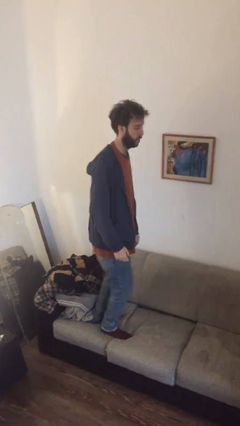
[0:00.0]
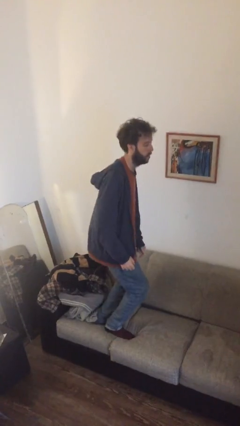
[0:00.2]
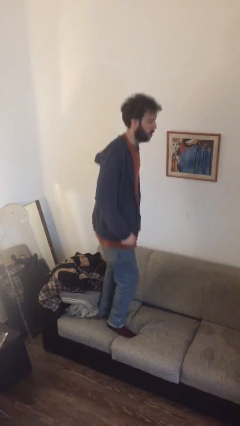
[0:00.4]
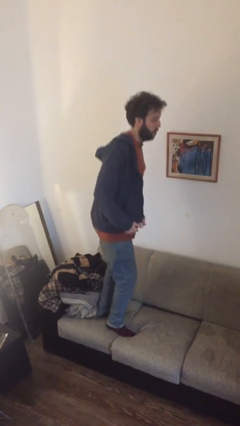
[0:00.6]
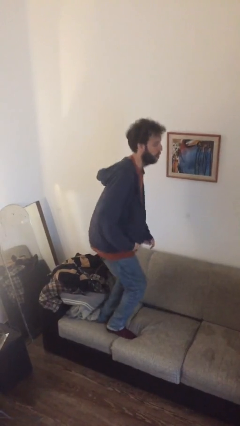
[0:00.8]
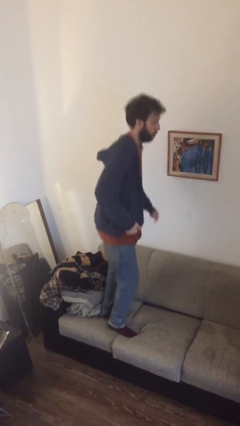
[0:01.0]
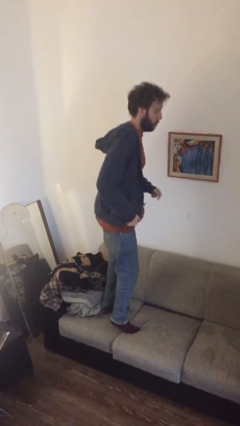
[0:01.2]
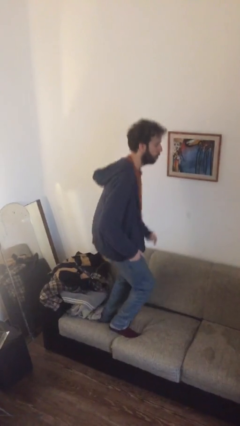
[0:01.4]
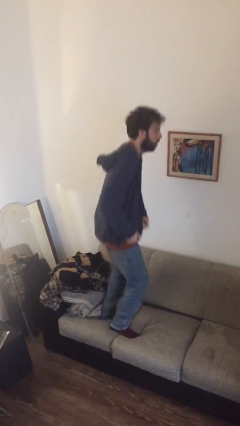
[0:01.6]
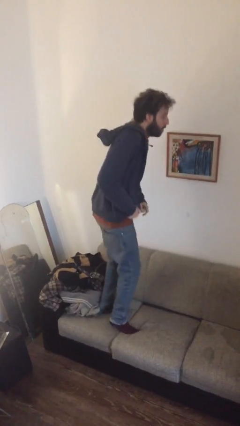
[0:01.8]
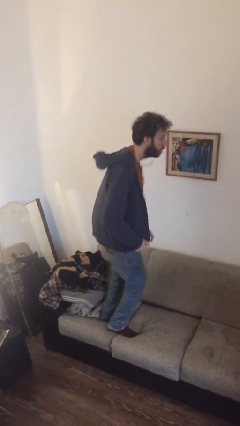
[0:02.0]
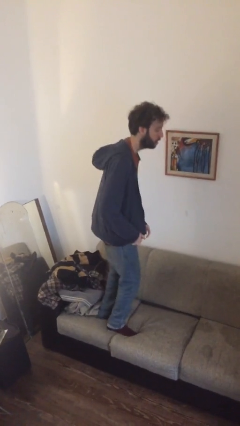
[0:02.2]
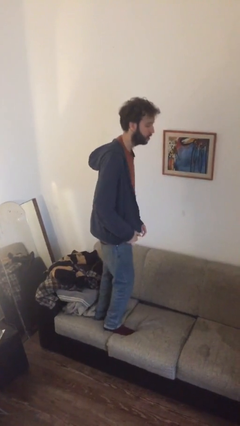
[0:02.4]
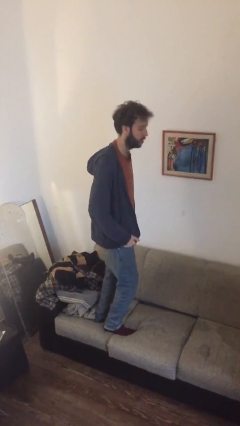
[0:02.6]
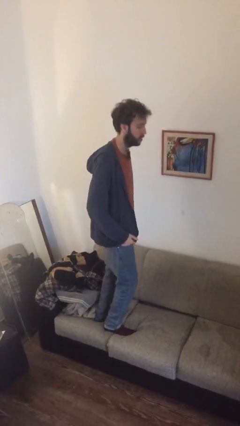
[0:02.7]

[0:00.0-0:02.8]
person jumps on couch

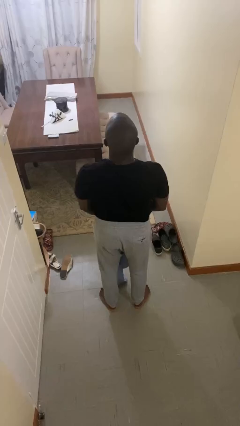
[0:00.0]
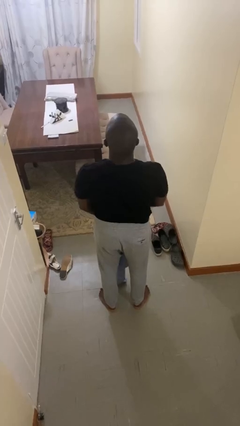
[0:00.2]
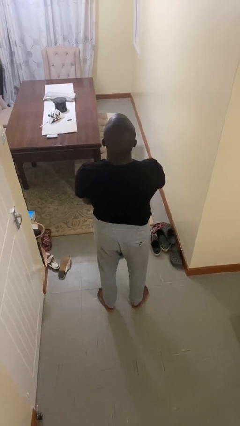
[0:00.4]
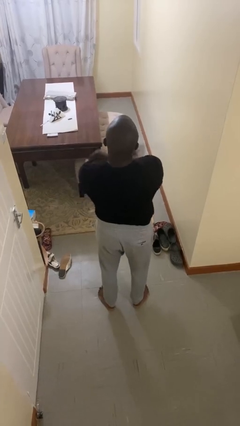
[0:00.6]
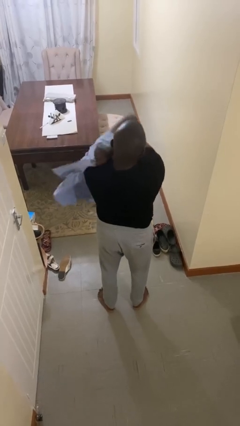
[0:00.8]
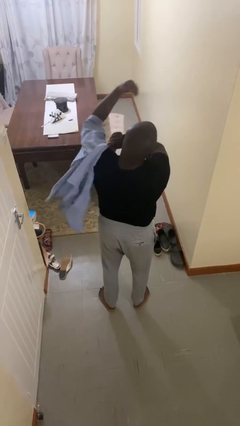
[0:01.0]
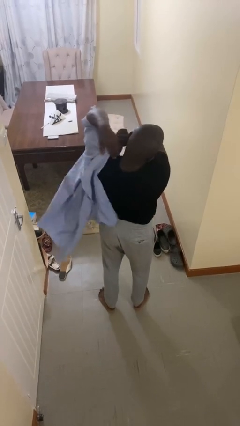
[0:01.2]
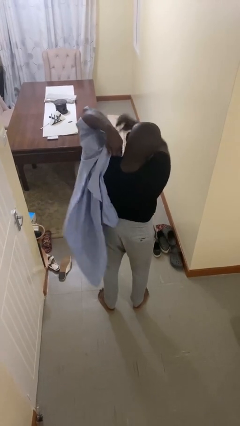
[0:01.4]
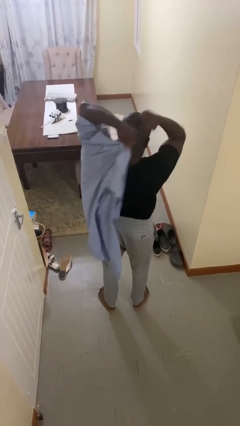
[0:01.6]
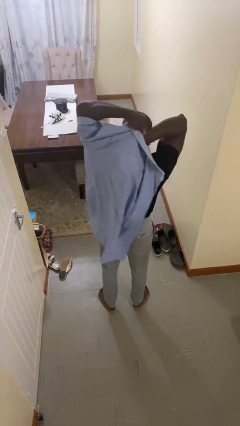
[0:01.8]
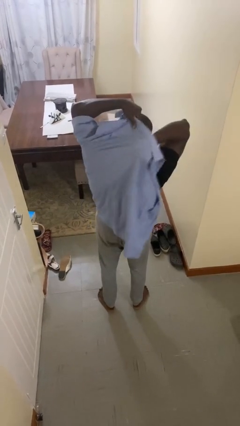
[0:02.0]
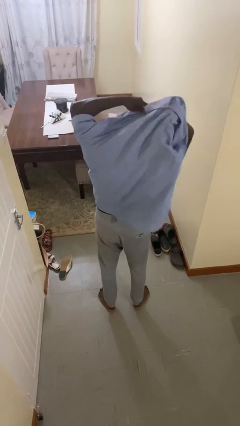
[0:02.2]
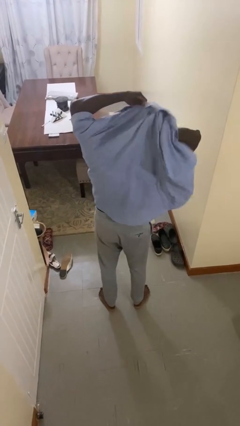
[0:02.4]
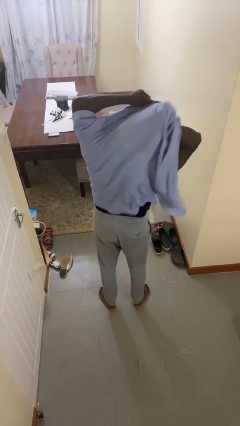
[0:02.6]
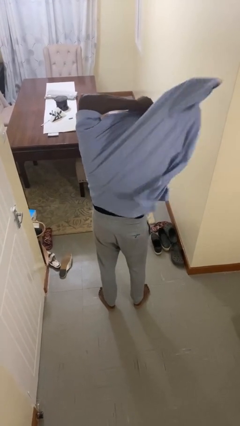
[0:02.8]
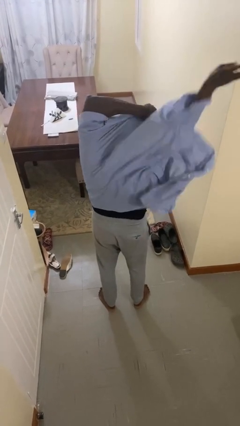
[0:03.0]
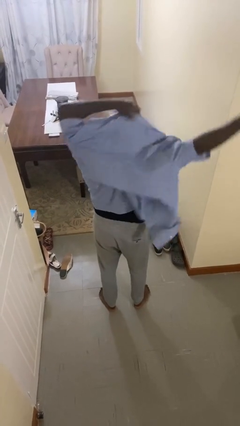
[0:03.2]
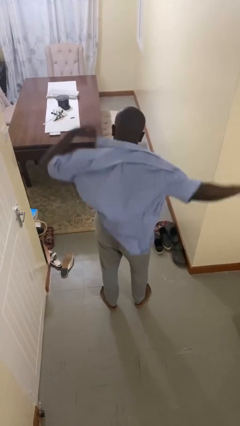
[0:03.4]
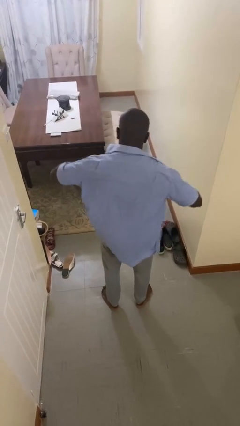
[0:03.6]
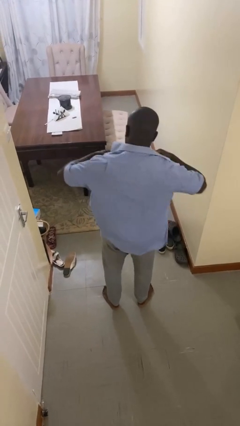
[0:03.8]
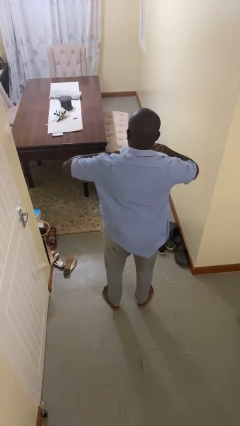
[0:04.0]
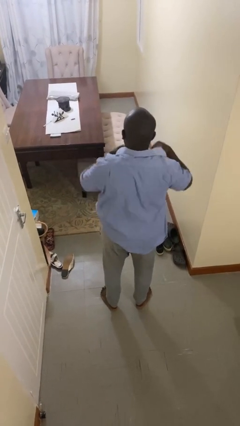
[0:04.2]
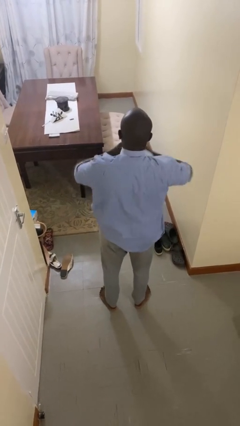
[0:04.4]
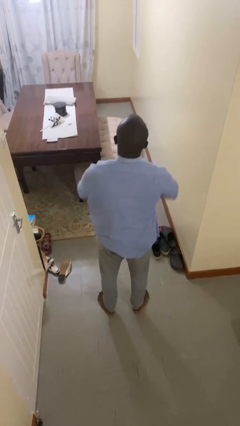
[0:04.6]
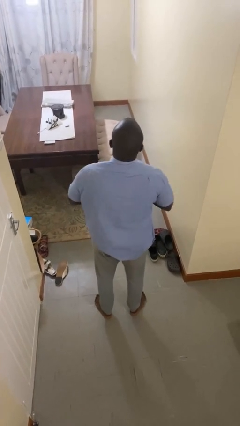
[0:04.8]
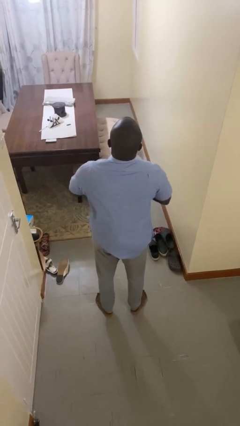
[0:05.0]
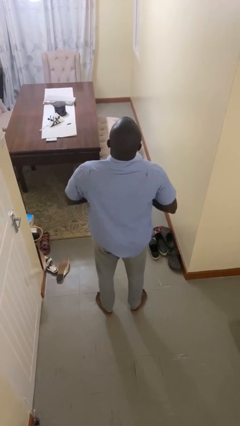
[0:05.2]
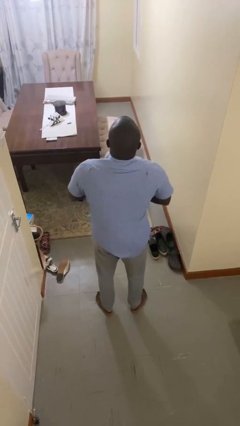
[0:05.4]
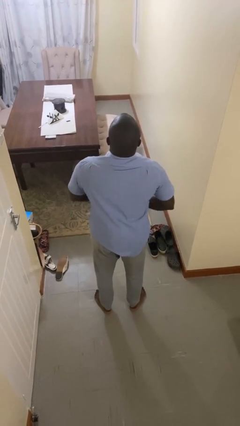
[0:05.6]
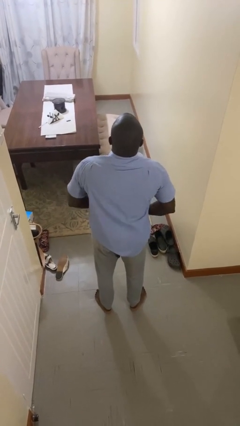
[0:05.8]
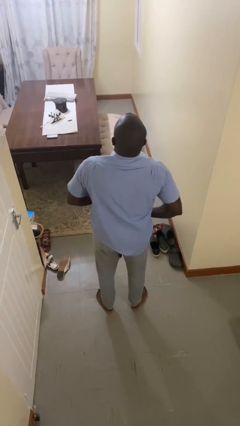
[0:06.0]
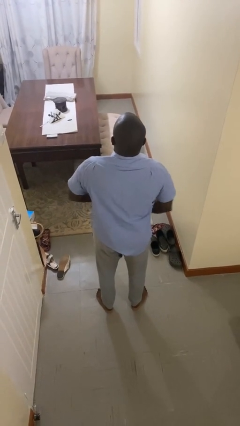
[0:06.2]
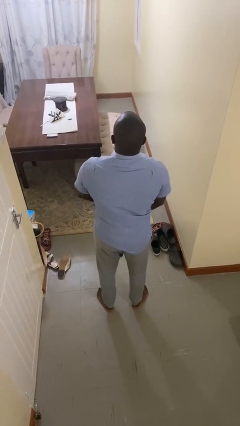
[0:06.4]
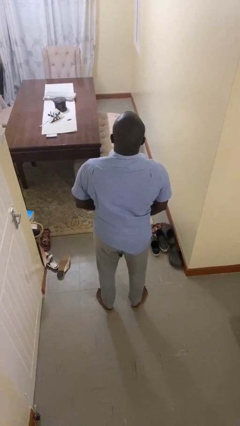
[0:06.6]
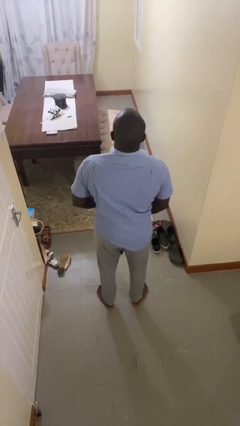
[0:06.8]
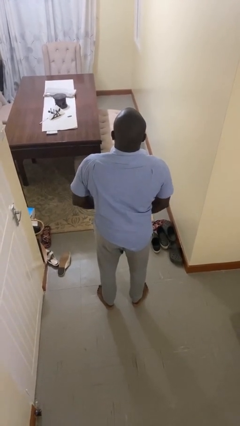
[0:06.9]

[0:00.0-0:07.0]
person puts on shirt

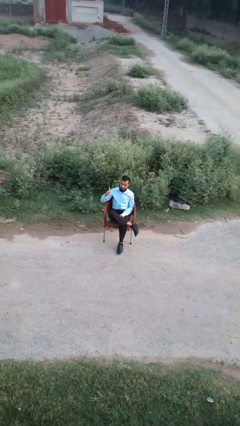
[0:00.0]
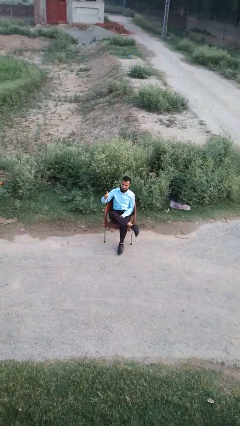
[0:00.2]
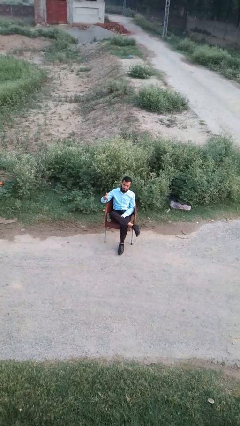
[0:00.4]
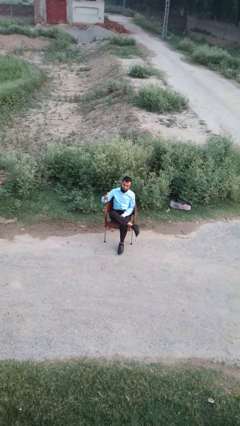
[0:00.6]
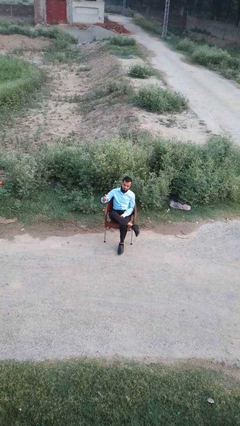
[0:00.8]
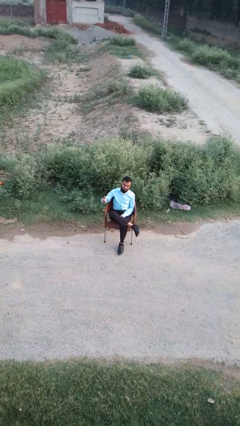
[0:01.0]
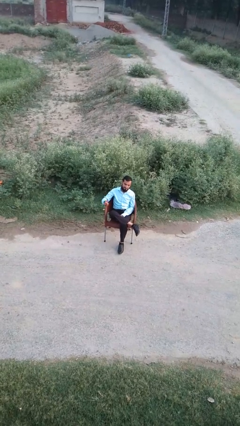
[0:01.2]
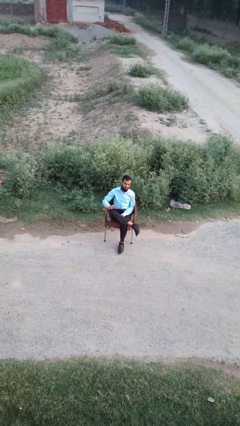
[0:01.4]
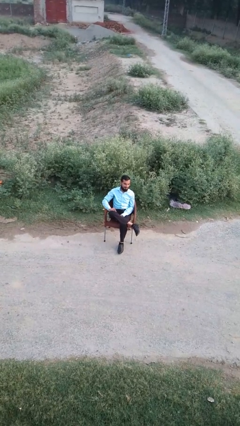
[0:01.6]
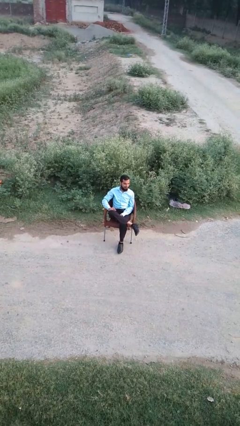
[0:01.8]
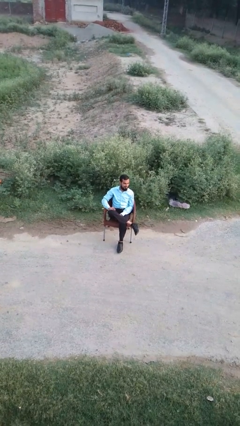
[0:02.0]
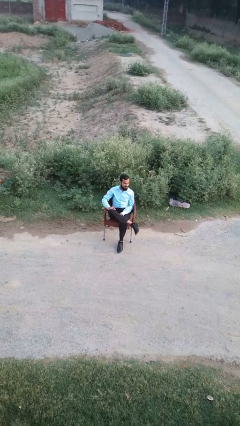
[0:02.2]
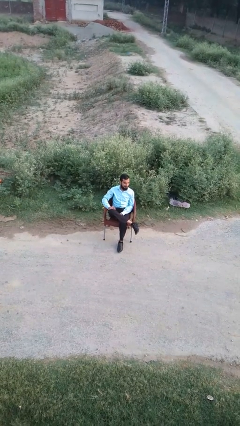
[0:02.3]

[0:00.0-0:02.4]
person gestures thumbs up

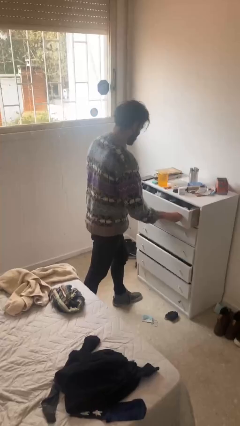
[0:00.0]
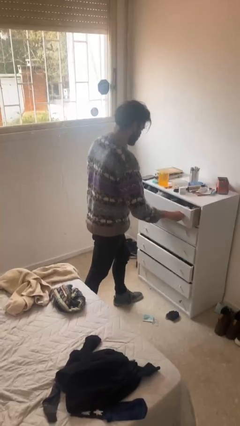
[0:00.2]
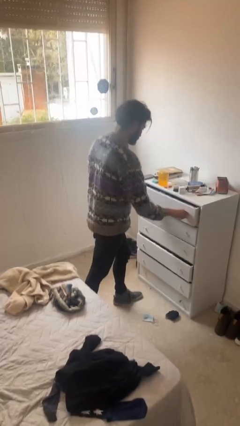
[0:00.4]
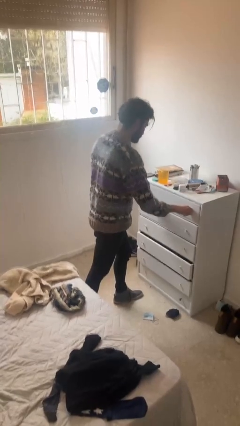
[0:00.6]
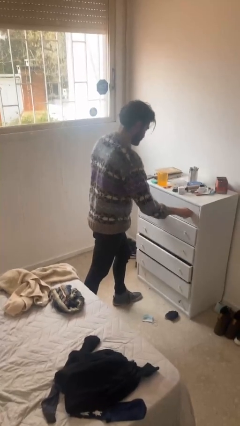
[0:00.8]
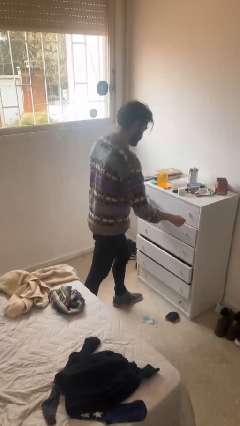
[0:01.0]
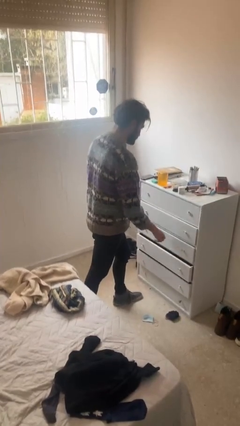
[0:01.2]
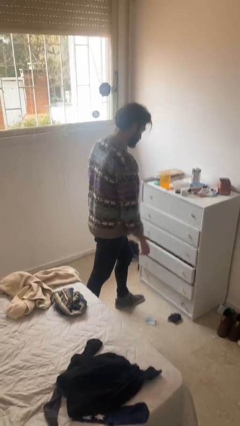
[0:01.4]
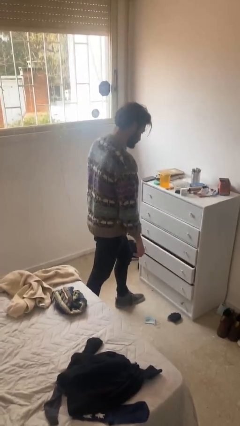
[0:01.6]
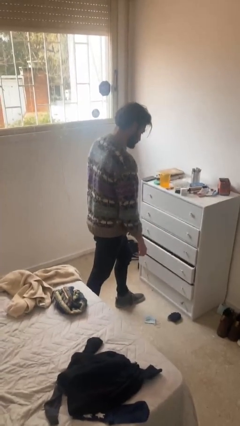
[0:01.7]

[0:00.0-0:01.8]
person closes dresser drawer

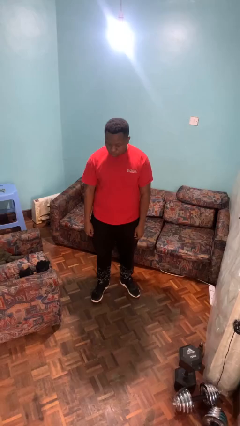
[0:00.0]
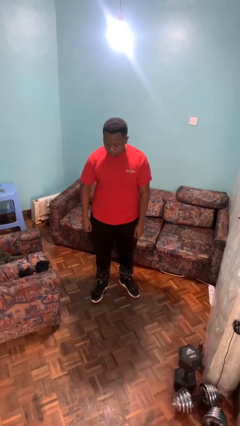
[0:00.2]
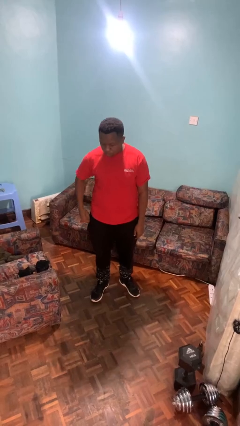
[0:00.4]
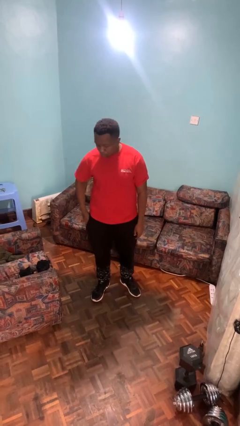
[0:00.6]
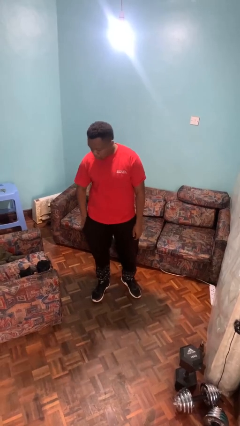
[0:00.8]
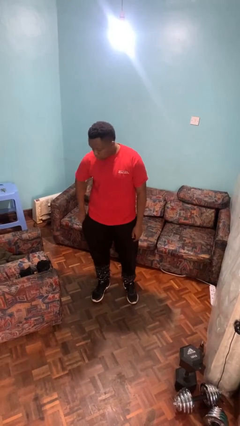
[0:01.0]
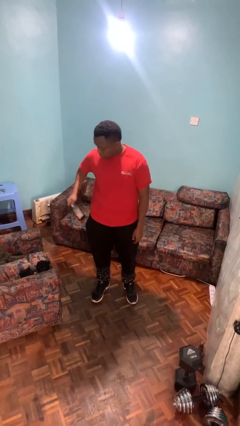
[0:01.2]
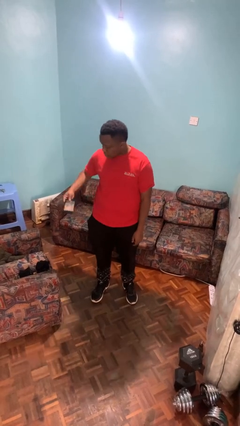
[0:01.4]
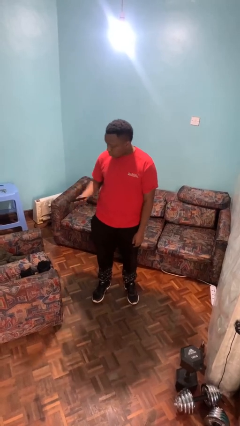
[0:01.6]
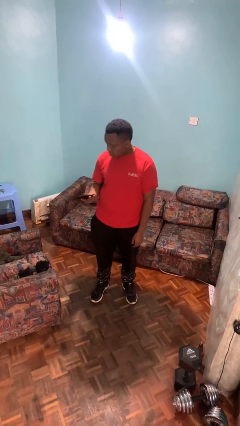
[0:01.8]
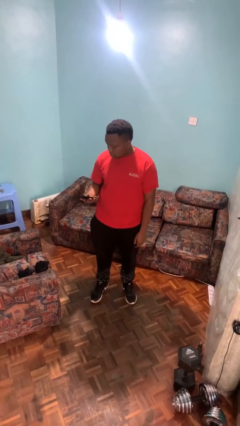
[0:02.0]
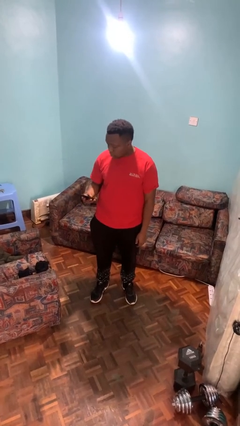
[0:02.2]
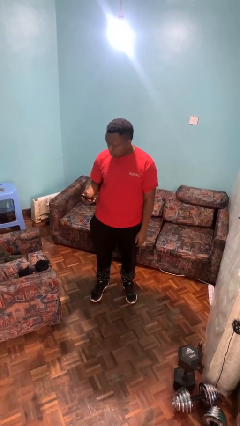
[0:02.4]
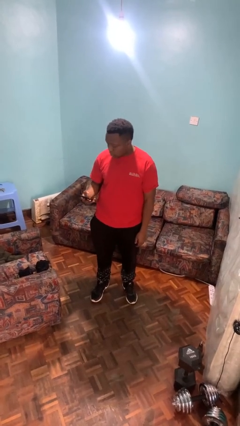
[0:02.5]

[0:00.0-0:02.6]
person takes phone from pocket

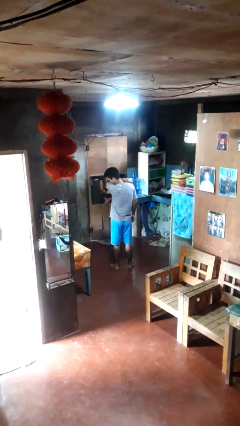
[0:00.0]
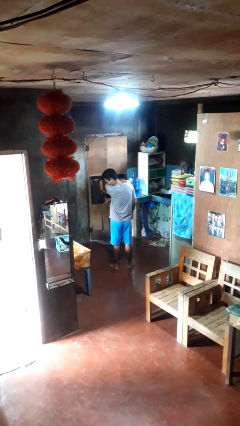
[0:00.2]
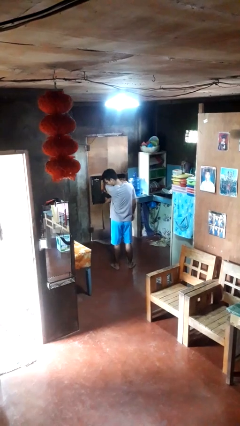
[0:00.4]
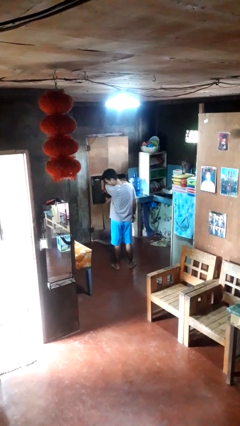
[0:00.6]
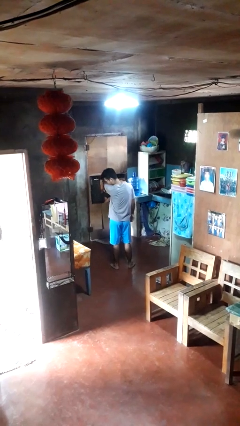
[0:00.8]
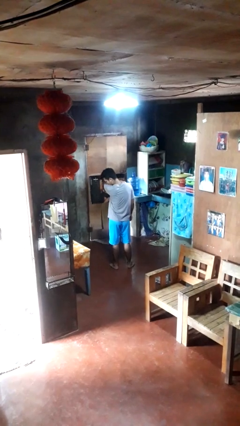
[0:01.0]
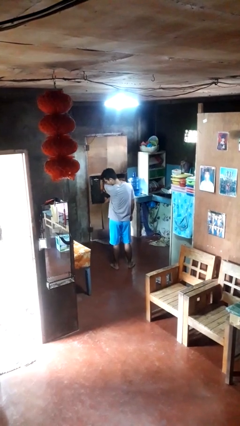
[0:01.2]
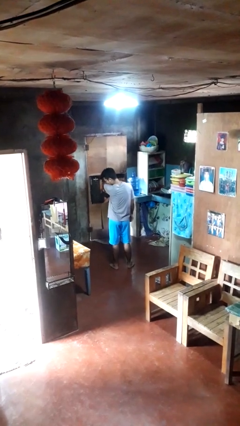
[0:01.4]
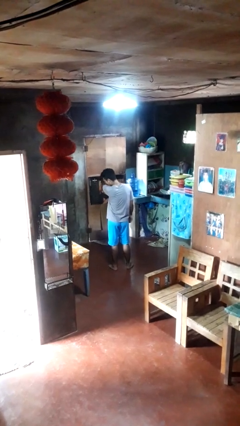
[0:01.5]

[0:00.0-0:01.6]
person sneezes into arm
